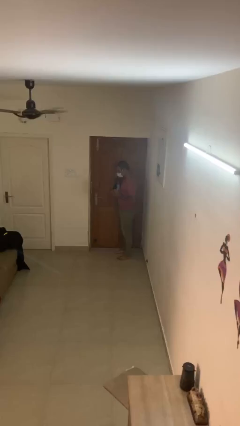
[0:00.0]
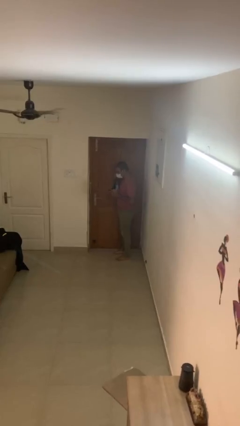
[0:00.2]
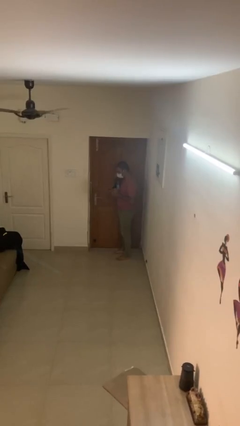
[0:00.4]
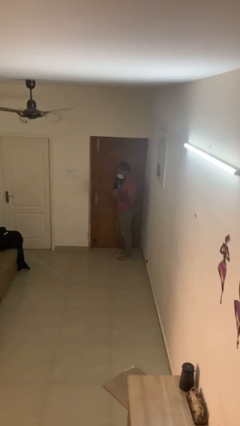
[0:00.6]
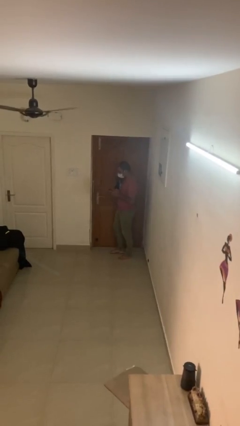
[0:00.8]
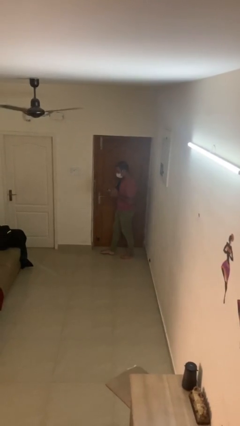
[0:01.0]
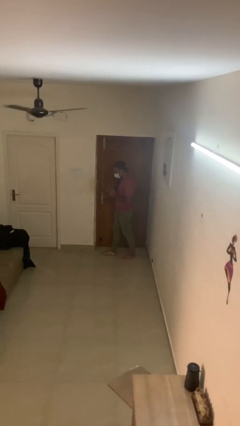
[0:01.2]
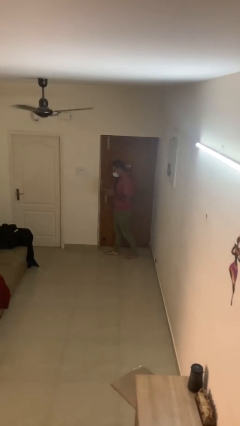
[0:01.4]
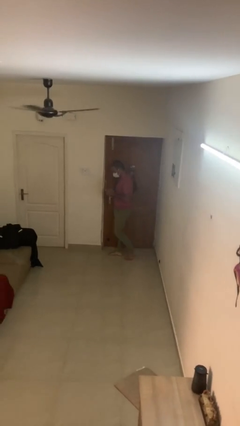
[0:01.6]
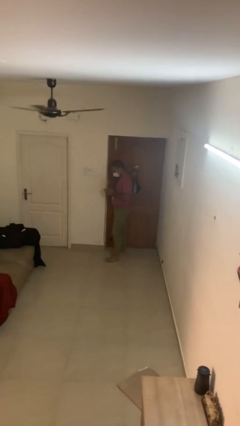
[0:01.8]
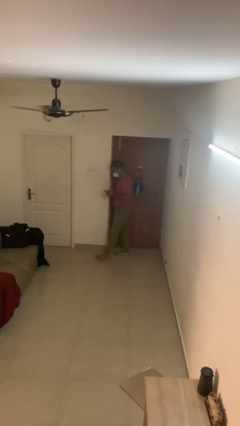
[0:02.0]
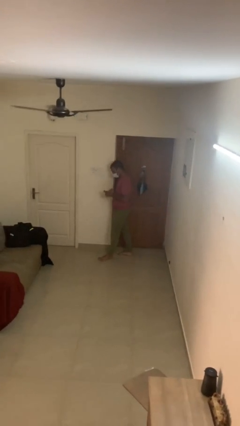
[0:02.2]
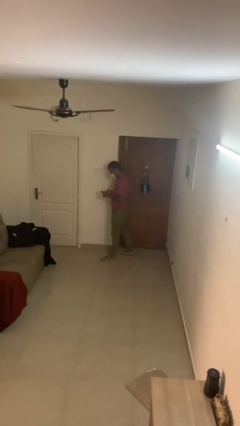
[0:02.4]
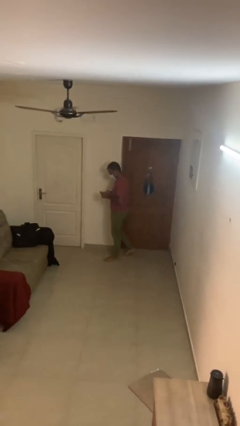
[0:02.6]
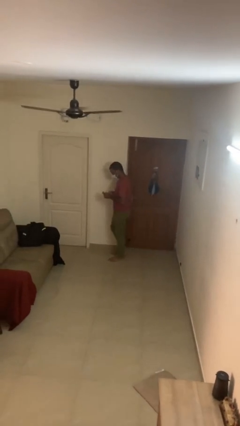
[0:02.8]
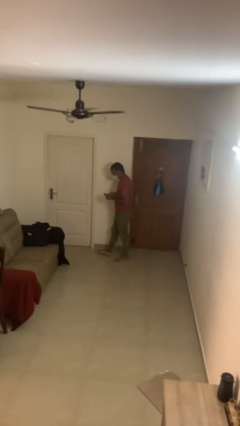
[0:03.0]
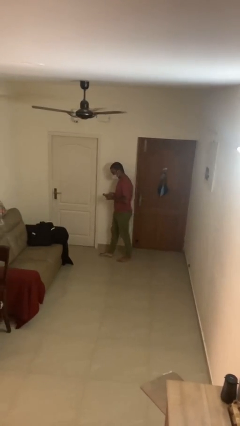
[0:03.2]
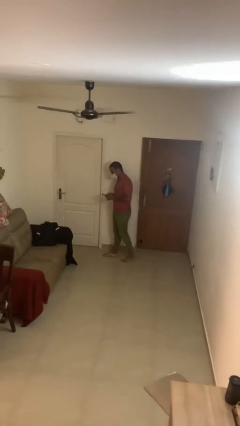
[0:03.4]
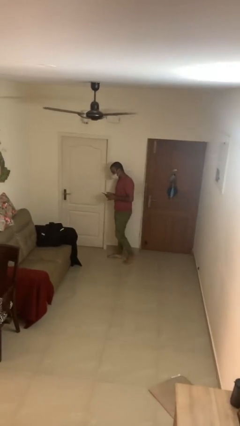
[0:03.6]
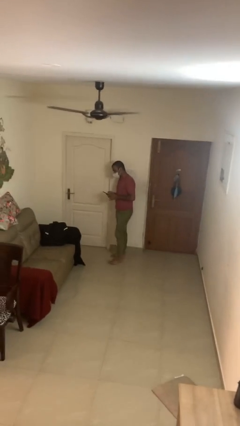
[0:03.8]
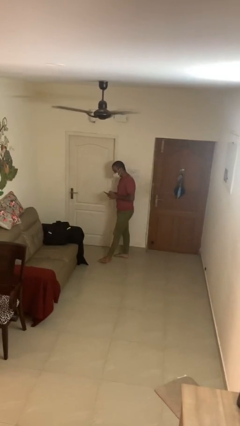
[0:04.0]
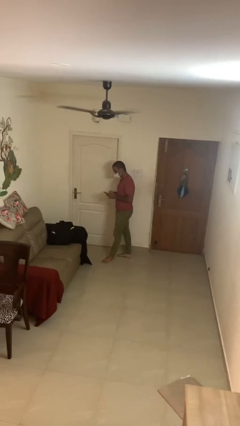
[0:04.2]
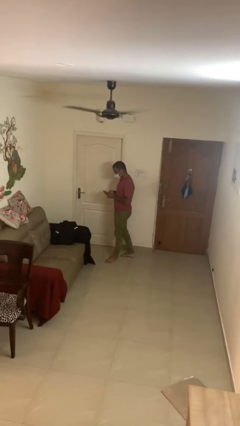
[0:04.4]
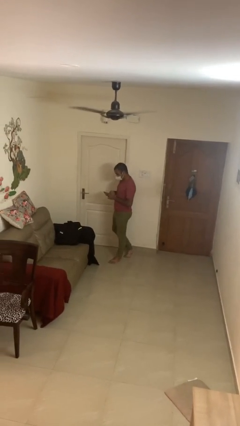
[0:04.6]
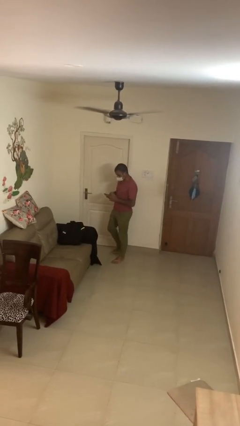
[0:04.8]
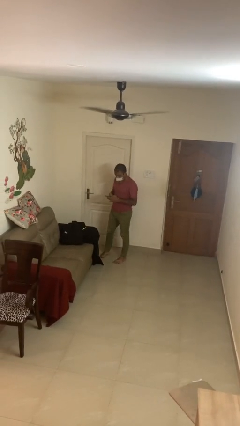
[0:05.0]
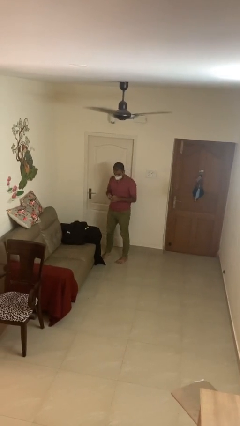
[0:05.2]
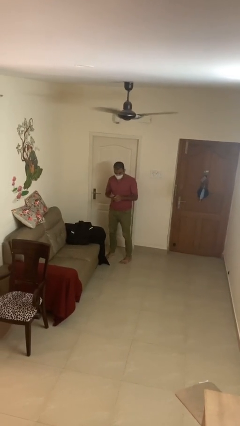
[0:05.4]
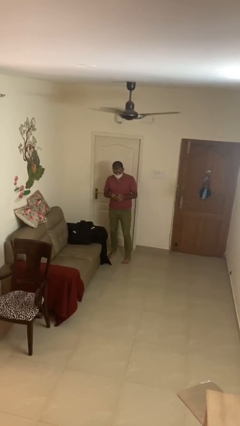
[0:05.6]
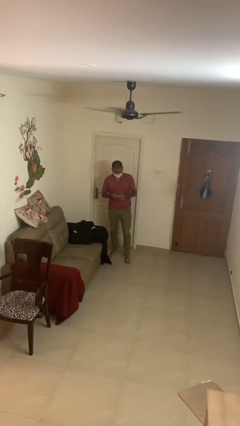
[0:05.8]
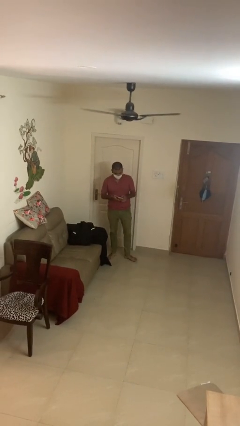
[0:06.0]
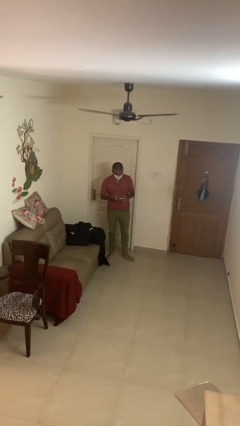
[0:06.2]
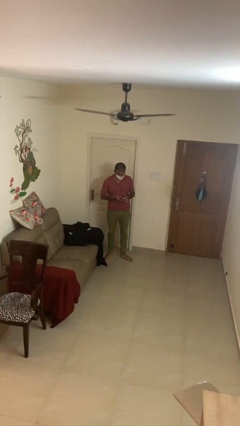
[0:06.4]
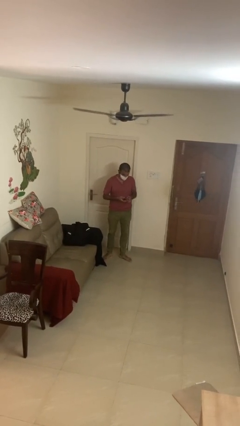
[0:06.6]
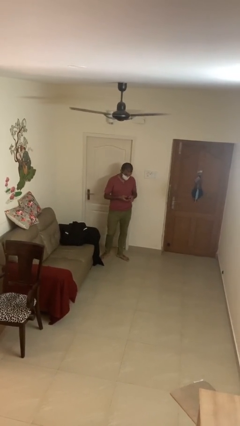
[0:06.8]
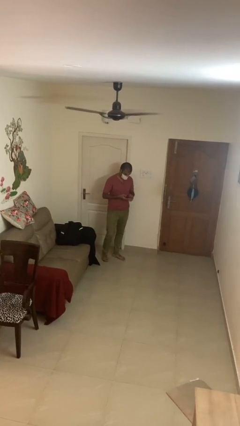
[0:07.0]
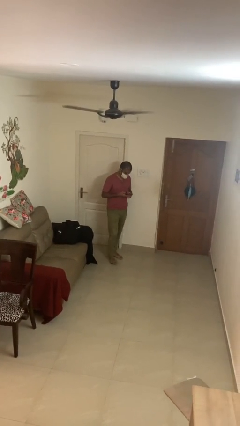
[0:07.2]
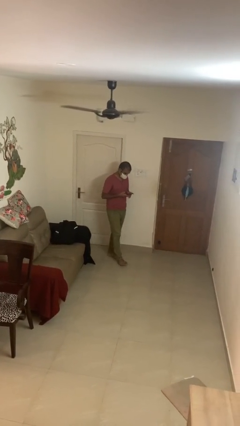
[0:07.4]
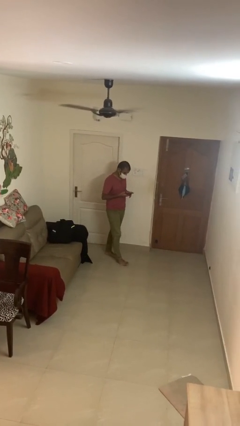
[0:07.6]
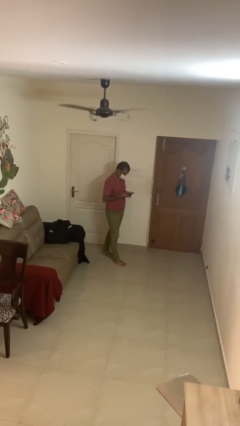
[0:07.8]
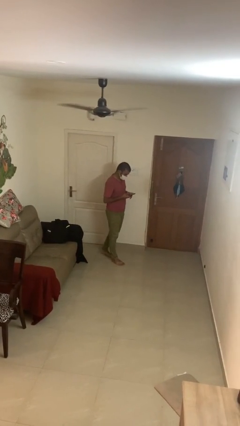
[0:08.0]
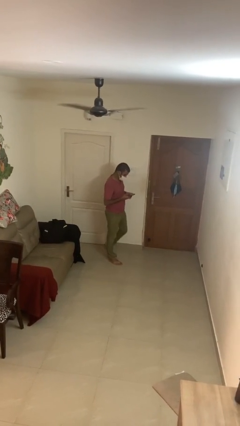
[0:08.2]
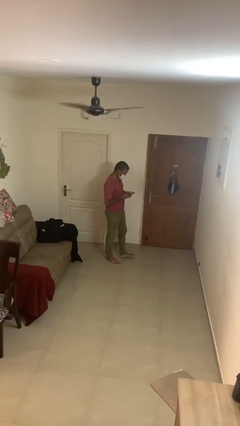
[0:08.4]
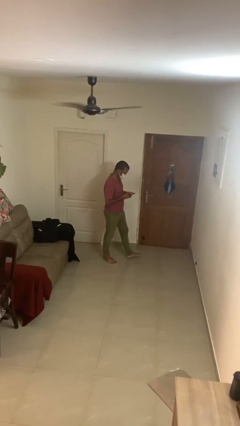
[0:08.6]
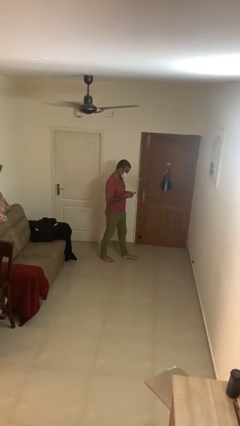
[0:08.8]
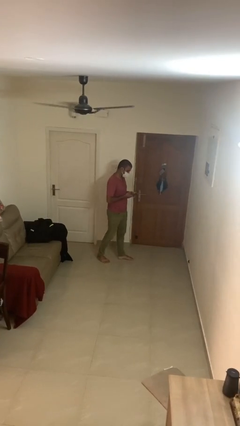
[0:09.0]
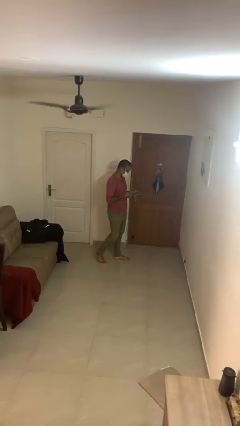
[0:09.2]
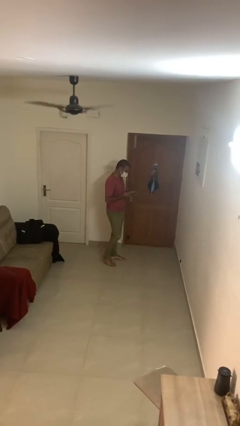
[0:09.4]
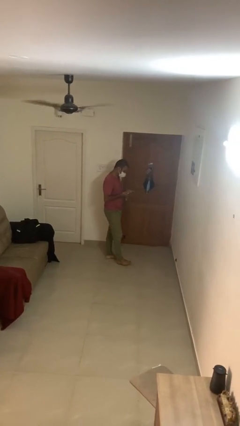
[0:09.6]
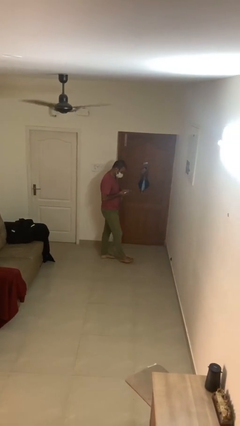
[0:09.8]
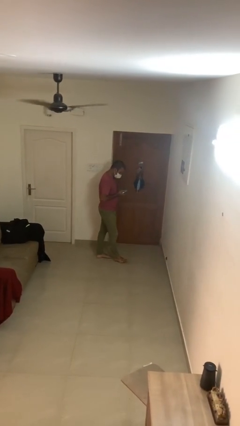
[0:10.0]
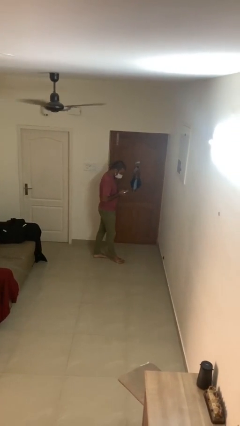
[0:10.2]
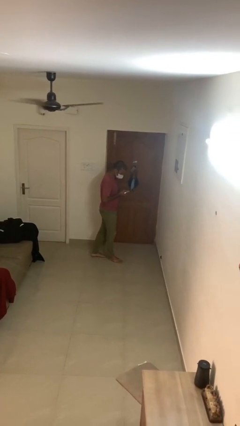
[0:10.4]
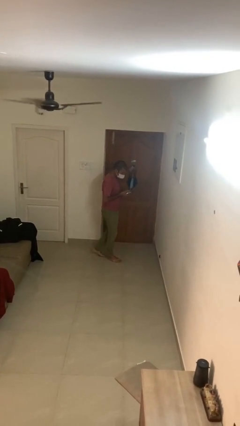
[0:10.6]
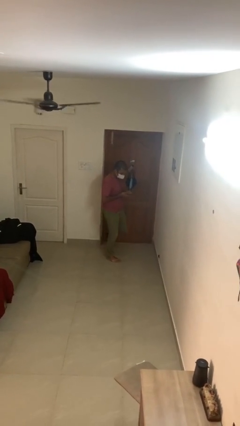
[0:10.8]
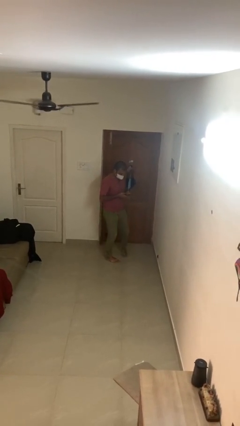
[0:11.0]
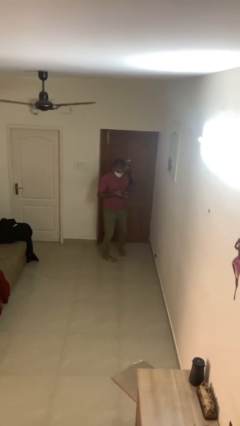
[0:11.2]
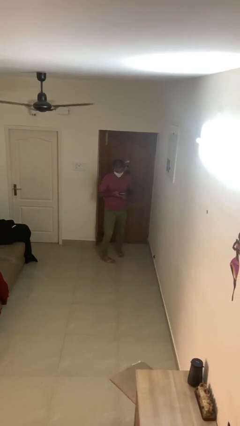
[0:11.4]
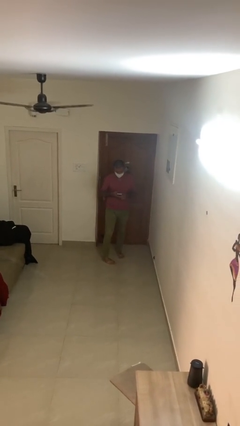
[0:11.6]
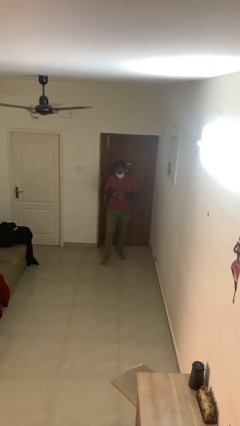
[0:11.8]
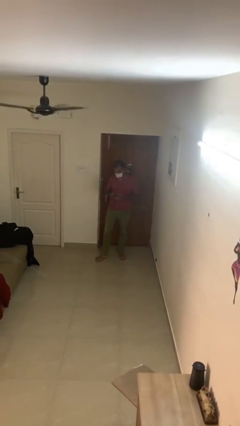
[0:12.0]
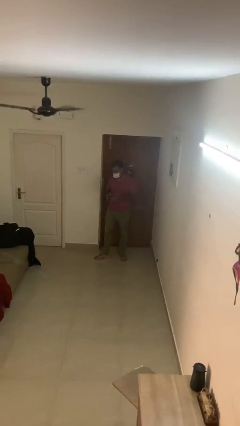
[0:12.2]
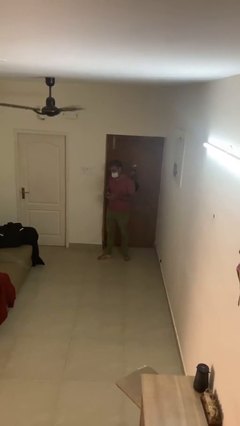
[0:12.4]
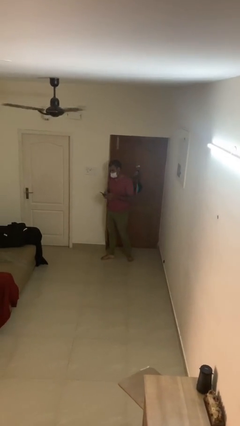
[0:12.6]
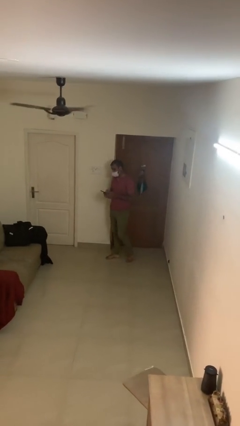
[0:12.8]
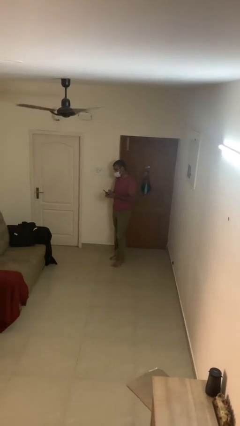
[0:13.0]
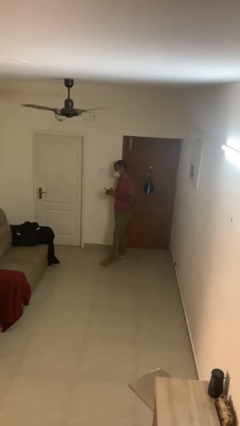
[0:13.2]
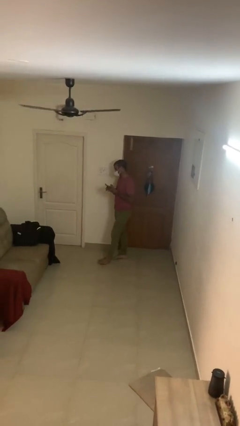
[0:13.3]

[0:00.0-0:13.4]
person texts on phone

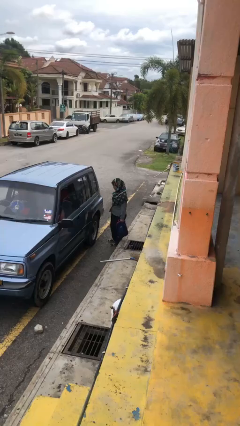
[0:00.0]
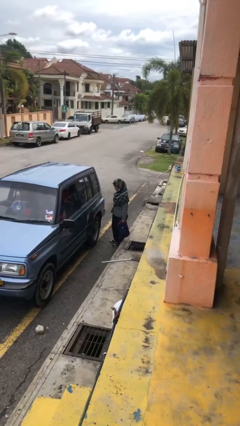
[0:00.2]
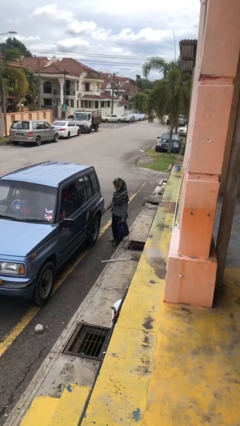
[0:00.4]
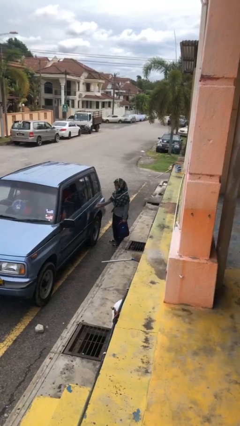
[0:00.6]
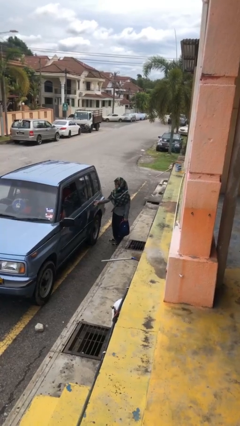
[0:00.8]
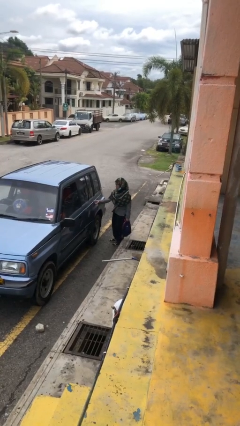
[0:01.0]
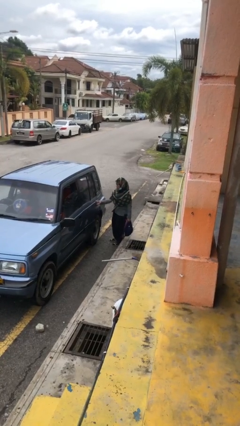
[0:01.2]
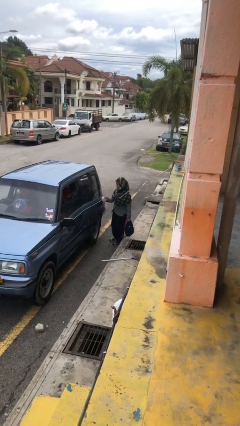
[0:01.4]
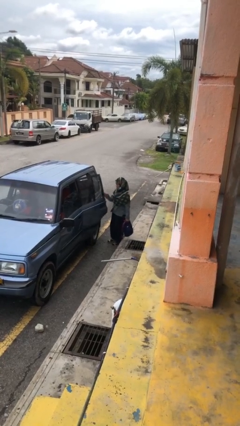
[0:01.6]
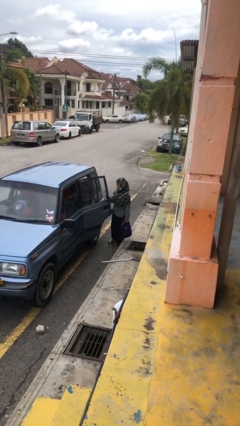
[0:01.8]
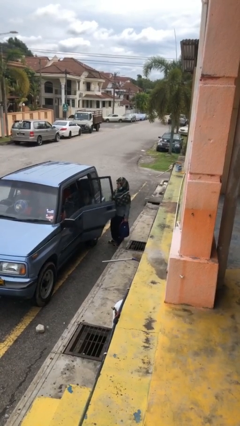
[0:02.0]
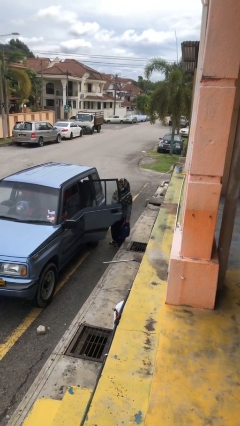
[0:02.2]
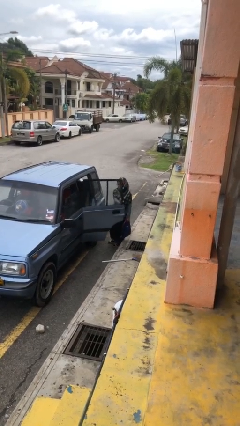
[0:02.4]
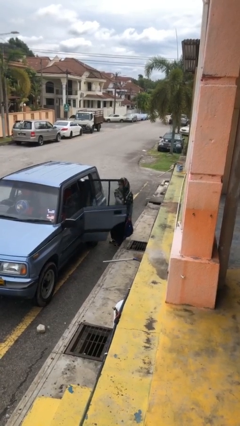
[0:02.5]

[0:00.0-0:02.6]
person opens car door

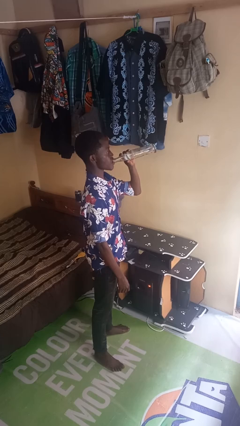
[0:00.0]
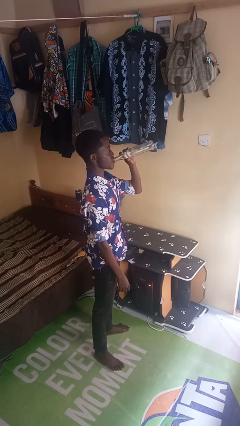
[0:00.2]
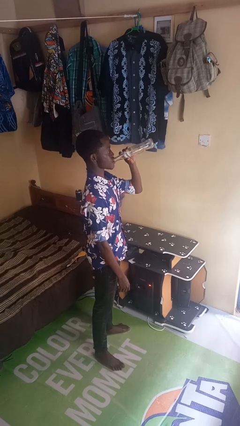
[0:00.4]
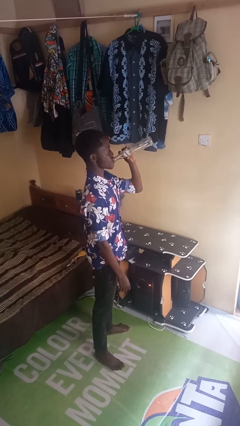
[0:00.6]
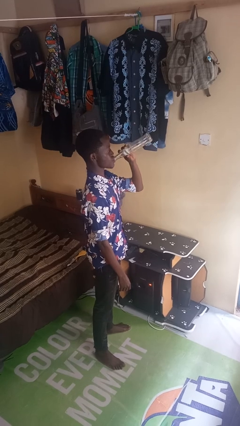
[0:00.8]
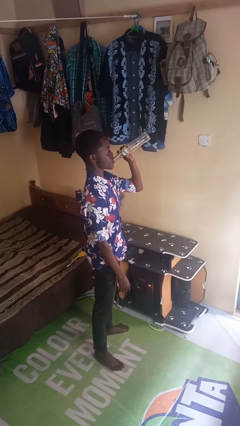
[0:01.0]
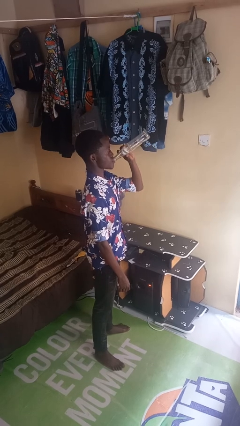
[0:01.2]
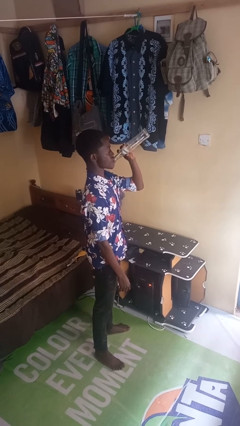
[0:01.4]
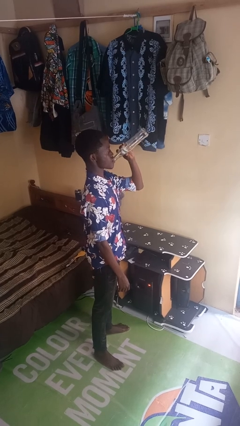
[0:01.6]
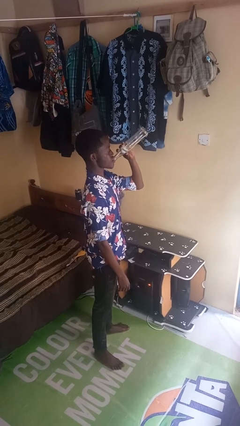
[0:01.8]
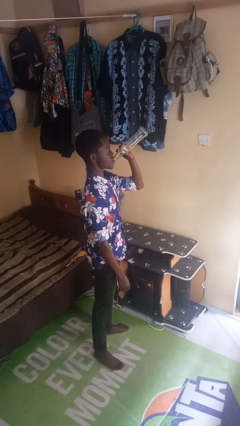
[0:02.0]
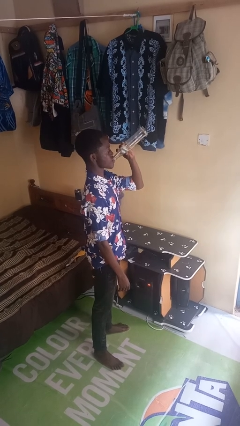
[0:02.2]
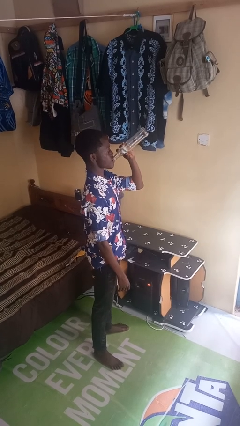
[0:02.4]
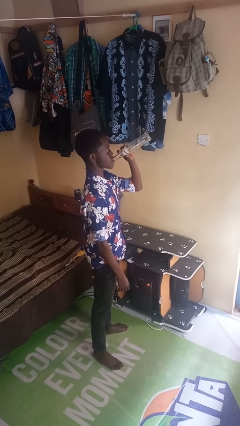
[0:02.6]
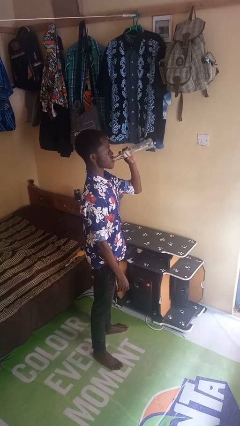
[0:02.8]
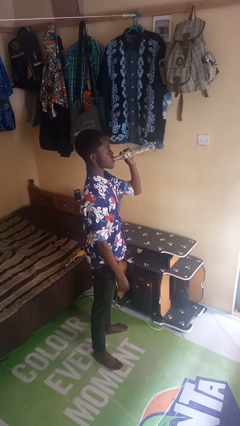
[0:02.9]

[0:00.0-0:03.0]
person drinks from bottle
